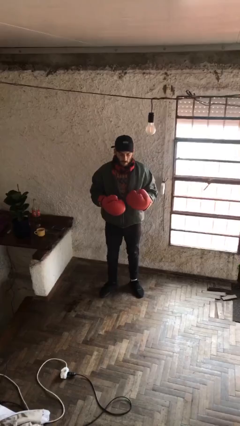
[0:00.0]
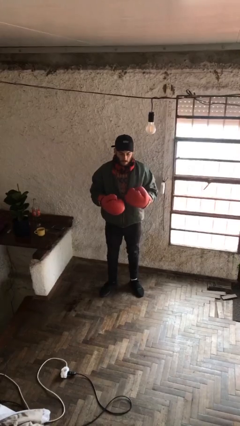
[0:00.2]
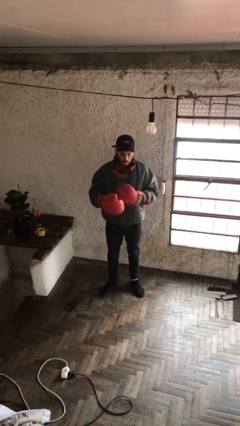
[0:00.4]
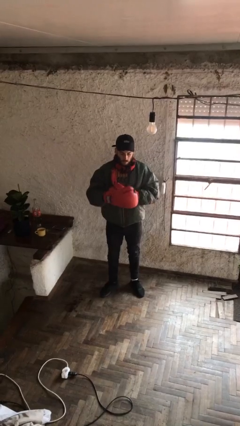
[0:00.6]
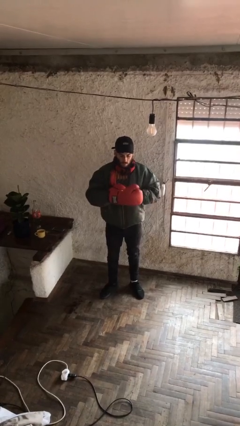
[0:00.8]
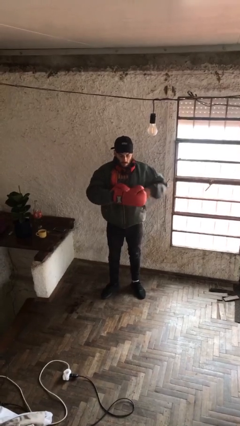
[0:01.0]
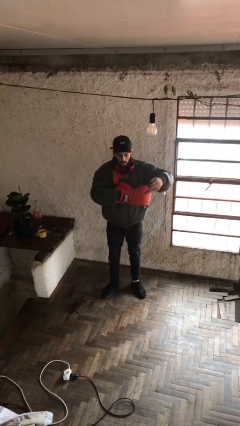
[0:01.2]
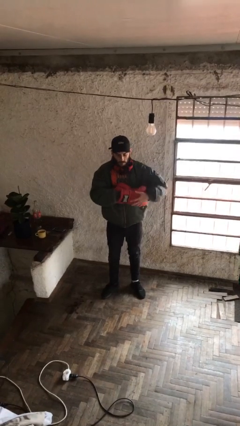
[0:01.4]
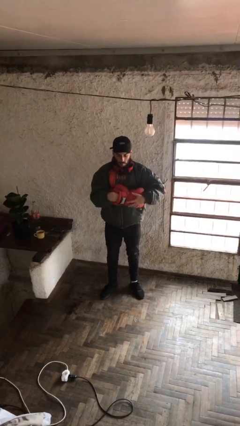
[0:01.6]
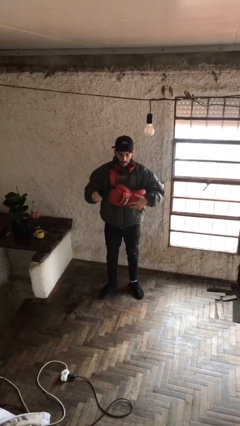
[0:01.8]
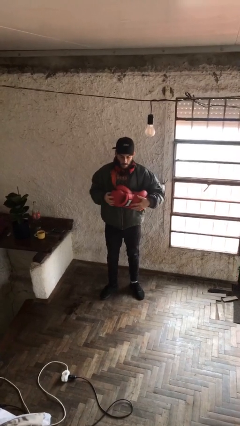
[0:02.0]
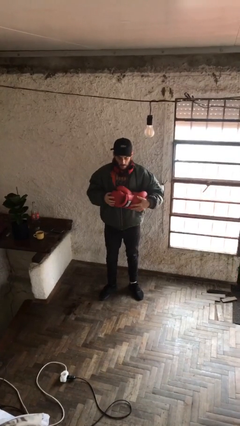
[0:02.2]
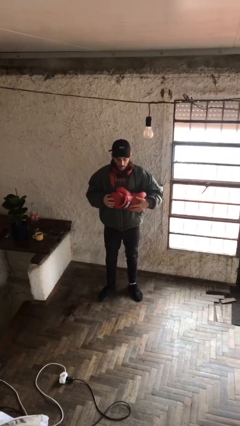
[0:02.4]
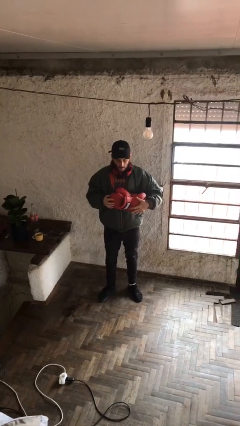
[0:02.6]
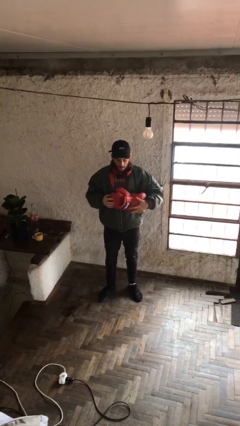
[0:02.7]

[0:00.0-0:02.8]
person takes off gloves

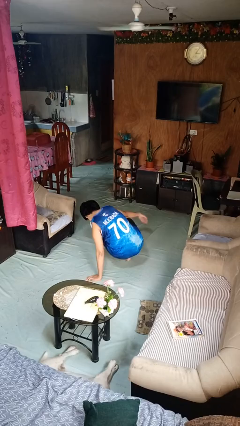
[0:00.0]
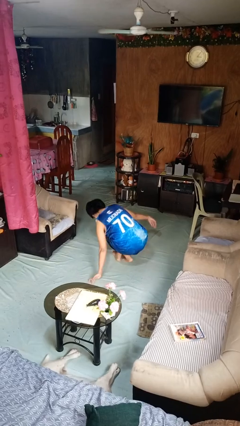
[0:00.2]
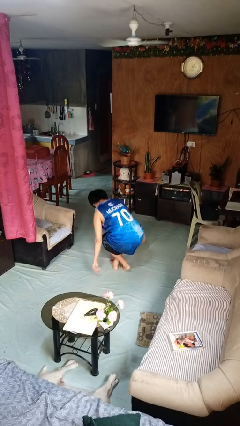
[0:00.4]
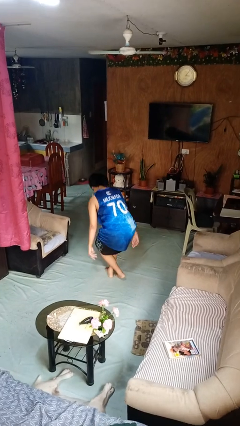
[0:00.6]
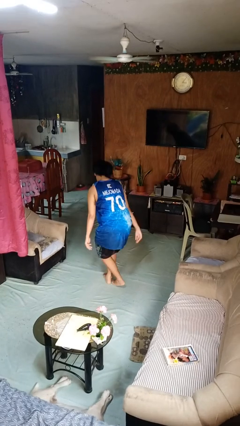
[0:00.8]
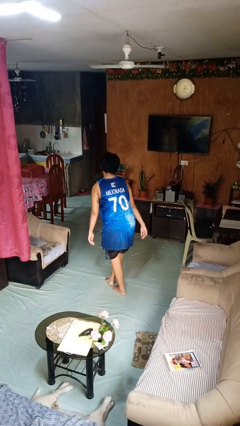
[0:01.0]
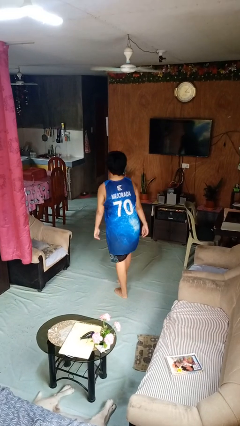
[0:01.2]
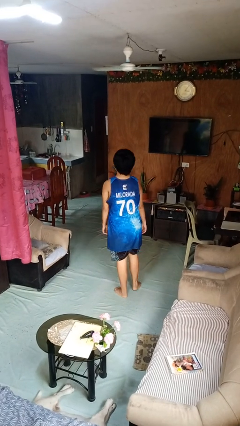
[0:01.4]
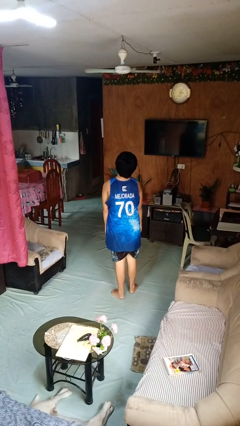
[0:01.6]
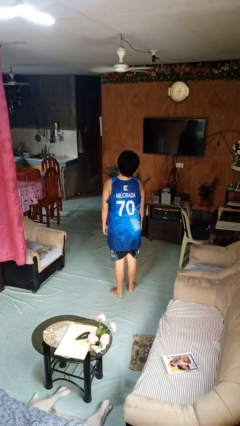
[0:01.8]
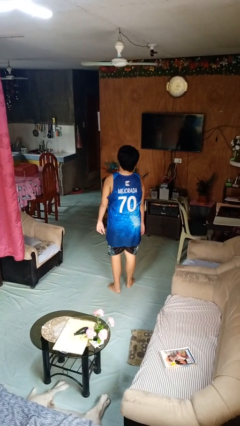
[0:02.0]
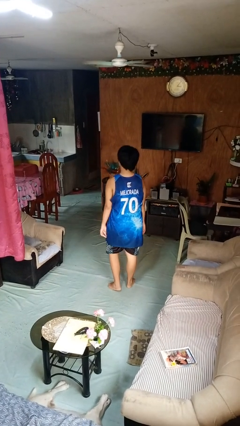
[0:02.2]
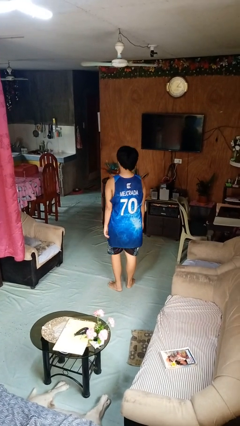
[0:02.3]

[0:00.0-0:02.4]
person stands up from floor

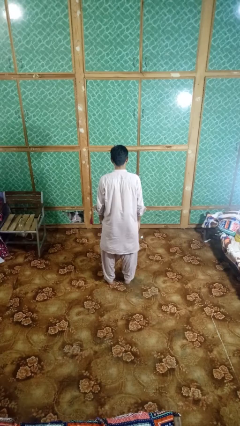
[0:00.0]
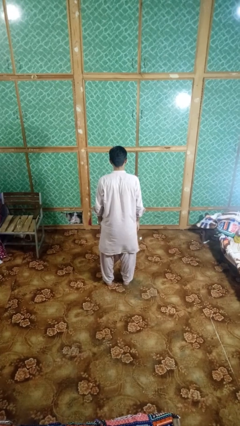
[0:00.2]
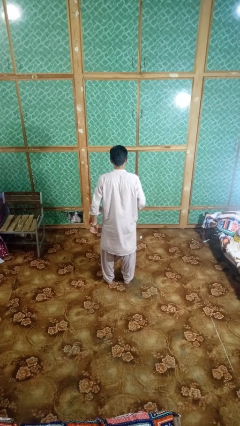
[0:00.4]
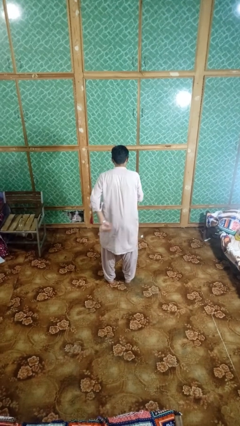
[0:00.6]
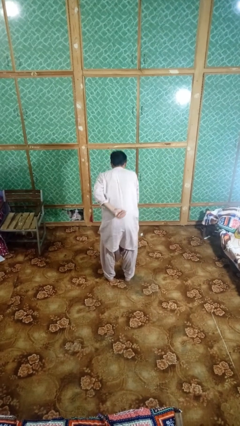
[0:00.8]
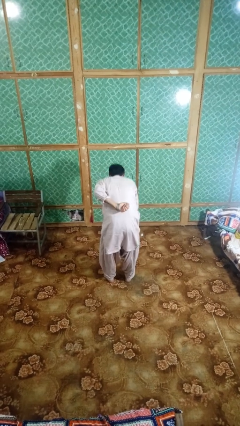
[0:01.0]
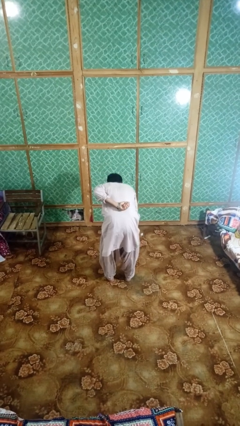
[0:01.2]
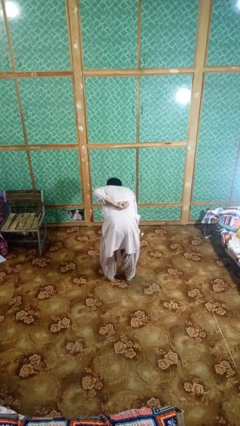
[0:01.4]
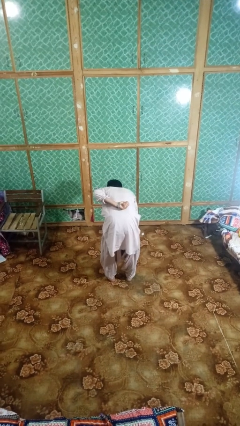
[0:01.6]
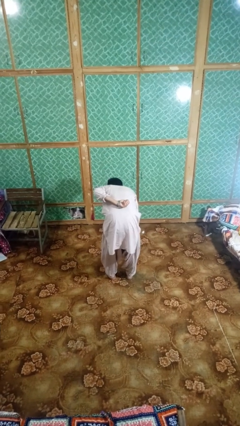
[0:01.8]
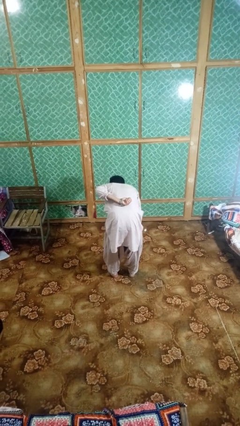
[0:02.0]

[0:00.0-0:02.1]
person bows

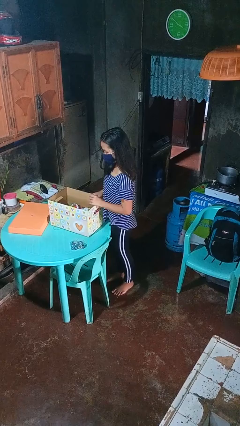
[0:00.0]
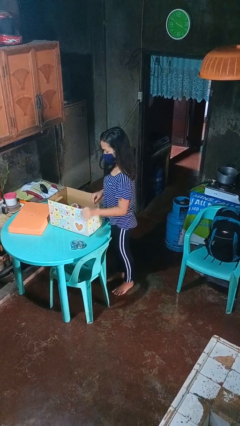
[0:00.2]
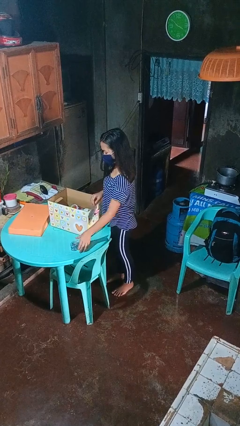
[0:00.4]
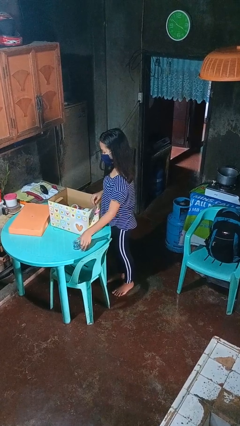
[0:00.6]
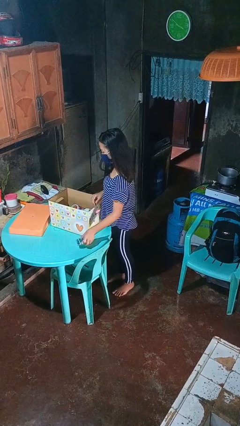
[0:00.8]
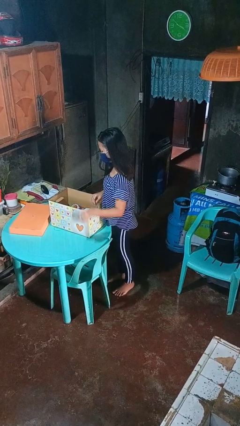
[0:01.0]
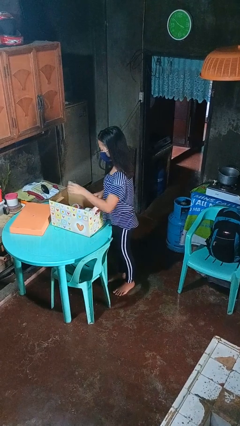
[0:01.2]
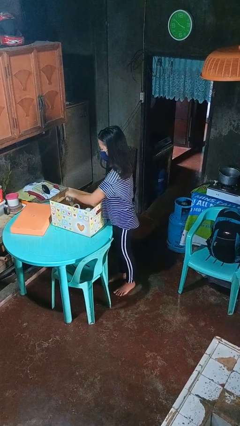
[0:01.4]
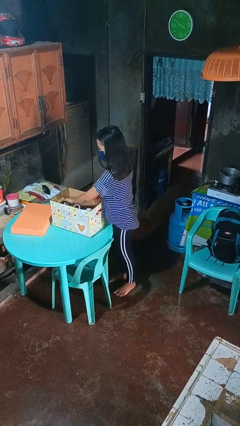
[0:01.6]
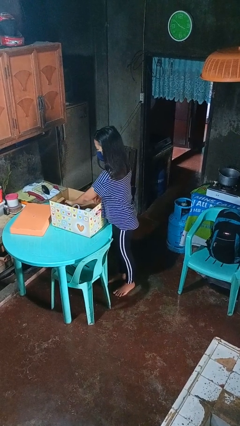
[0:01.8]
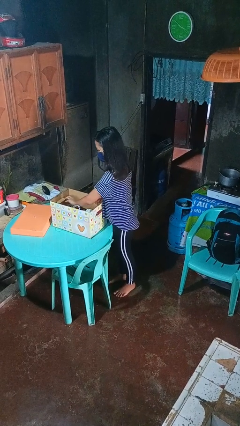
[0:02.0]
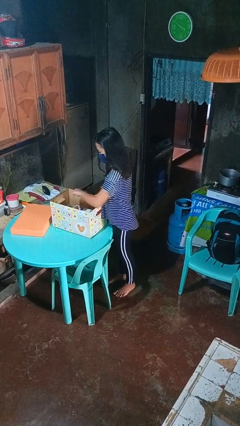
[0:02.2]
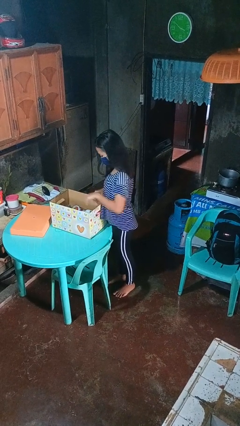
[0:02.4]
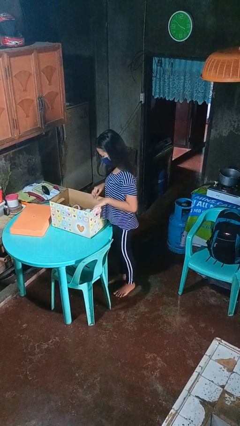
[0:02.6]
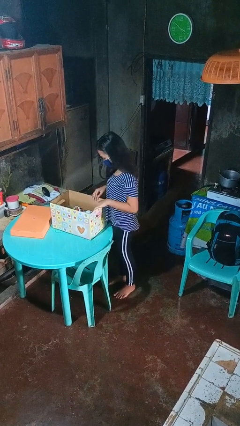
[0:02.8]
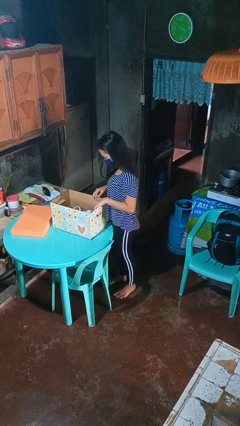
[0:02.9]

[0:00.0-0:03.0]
person puts object into box

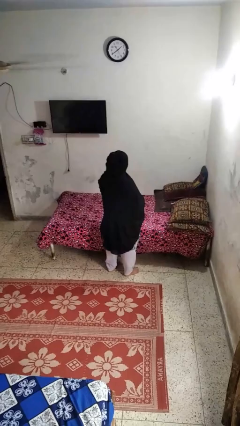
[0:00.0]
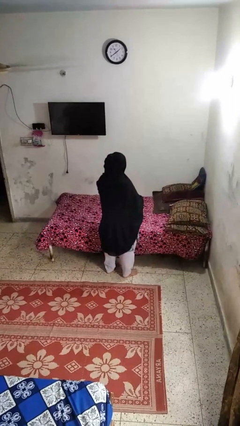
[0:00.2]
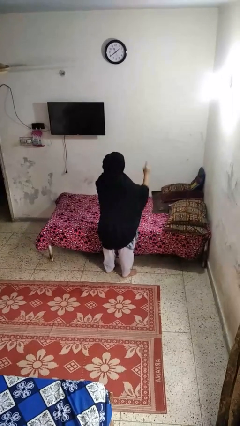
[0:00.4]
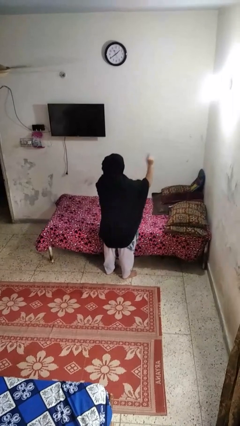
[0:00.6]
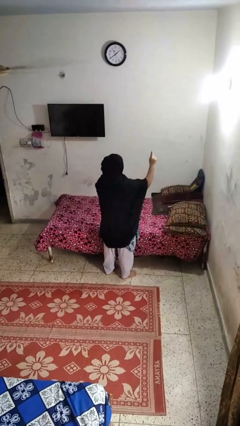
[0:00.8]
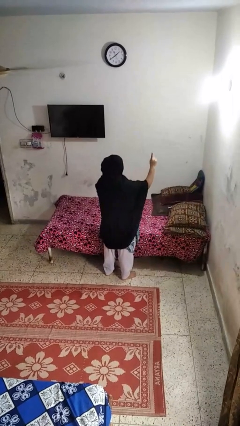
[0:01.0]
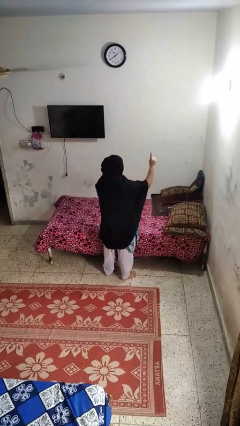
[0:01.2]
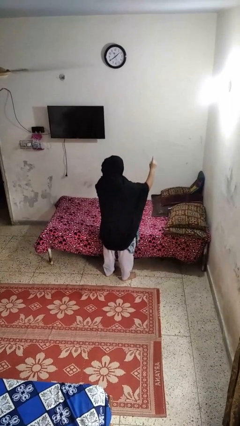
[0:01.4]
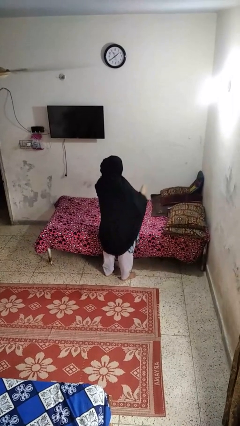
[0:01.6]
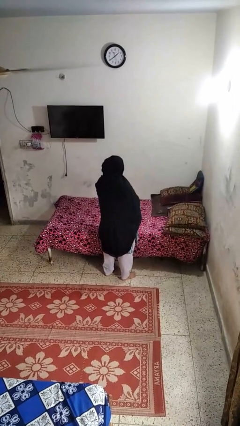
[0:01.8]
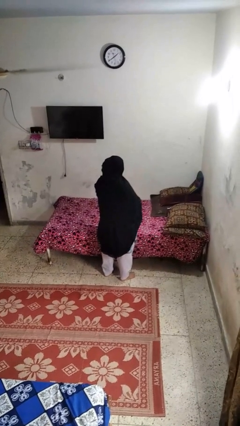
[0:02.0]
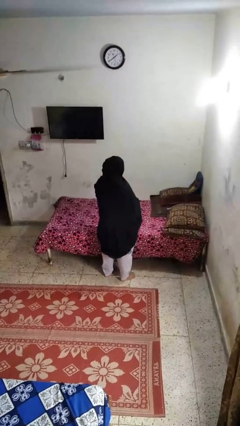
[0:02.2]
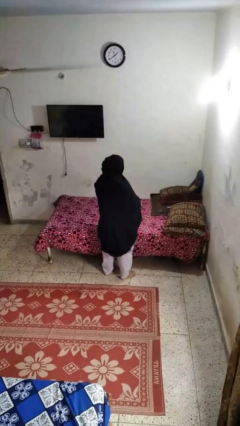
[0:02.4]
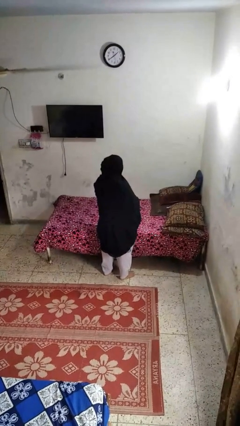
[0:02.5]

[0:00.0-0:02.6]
person gestures number one

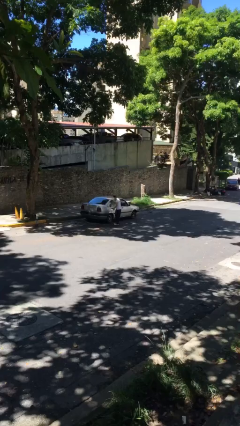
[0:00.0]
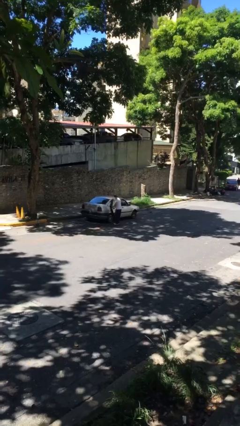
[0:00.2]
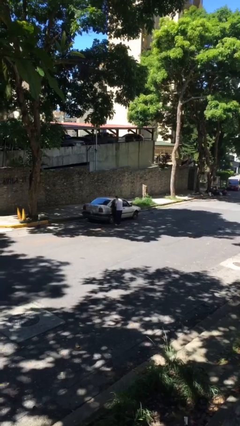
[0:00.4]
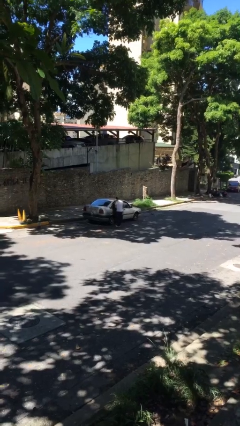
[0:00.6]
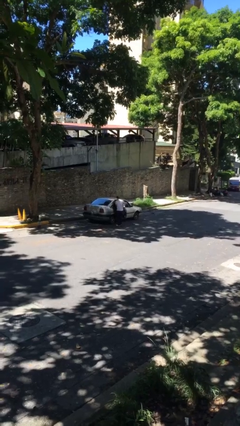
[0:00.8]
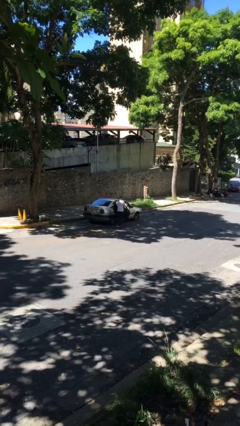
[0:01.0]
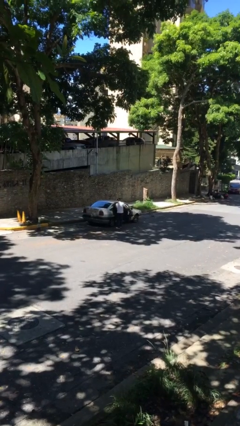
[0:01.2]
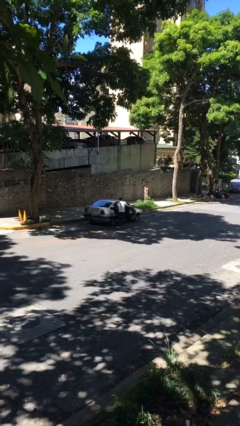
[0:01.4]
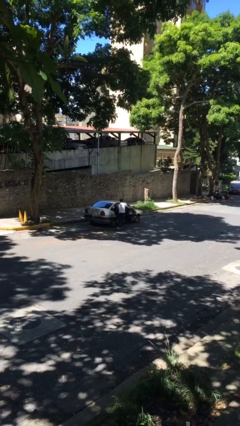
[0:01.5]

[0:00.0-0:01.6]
person opens car door

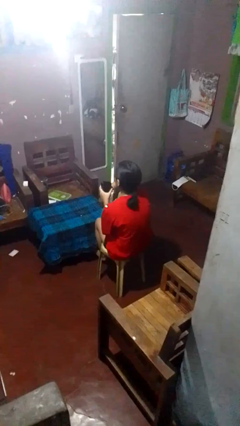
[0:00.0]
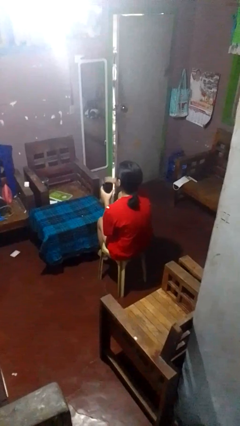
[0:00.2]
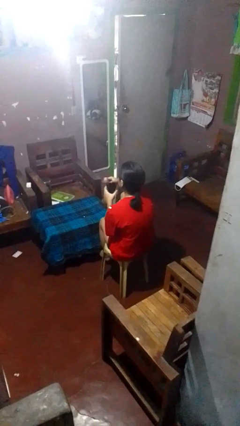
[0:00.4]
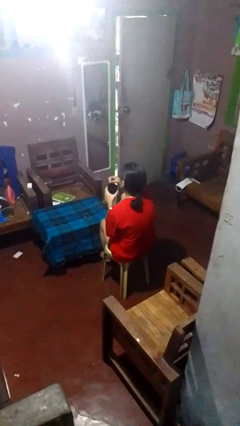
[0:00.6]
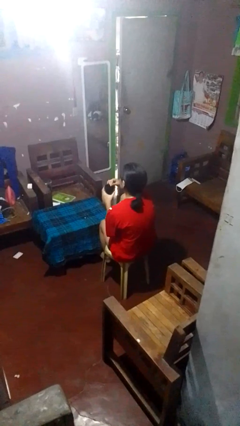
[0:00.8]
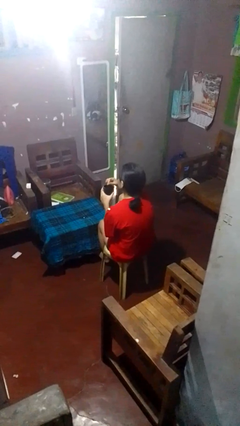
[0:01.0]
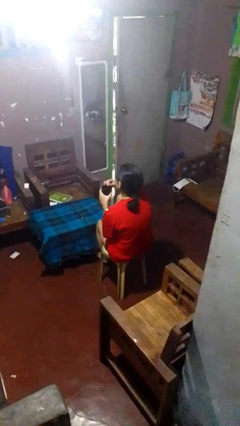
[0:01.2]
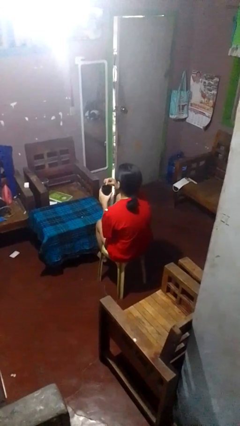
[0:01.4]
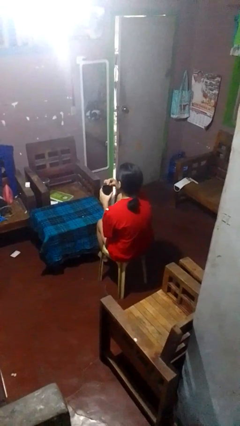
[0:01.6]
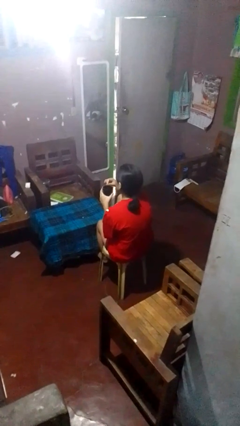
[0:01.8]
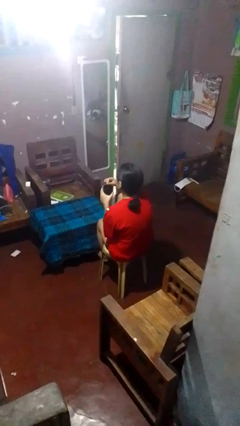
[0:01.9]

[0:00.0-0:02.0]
person stirs mug

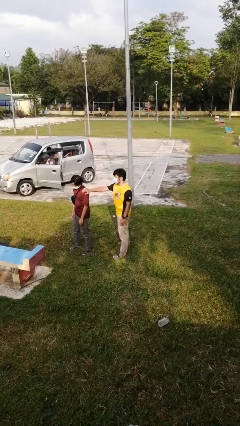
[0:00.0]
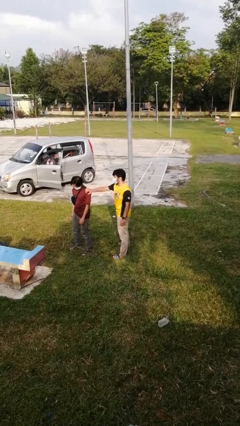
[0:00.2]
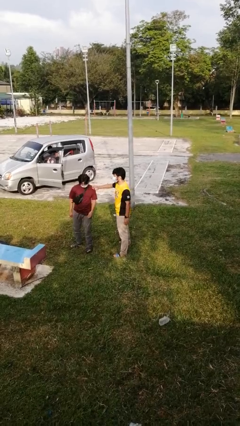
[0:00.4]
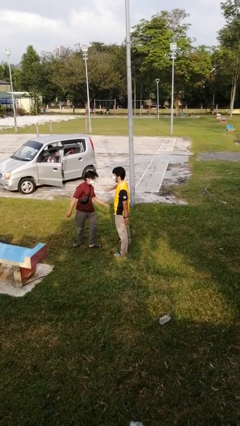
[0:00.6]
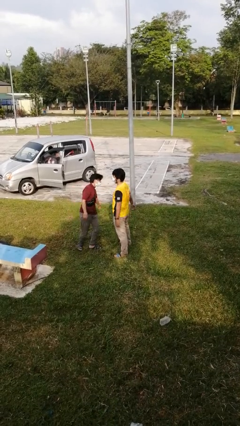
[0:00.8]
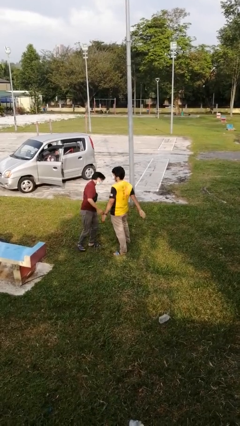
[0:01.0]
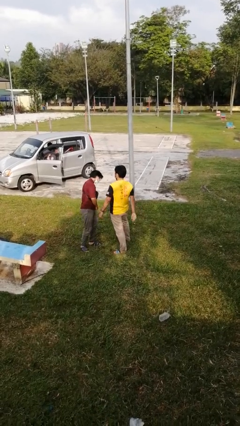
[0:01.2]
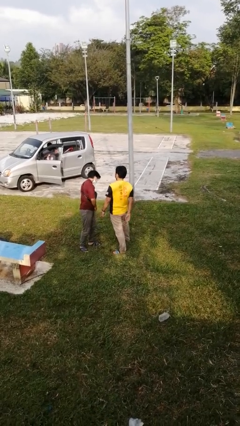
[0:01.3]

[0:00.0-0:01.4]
person spins person around
